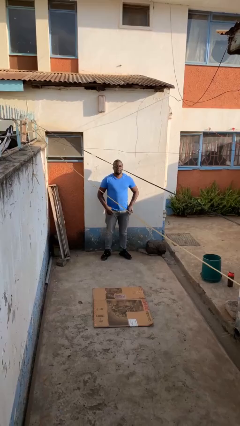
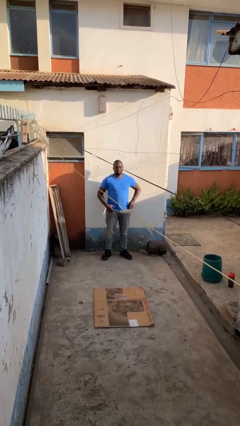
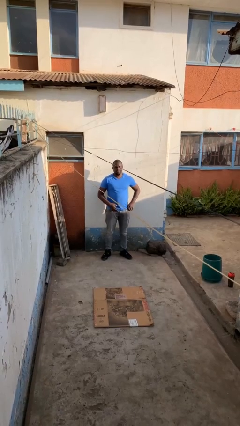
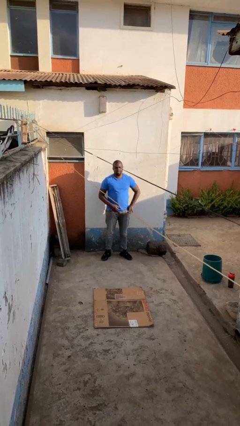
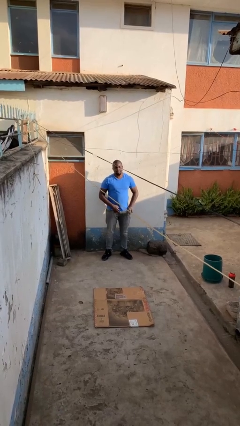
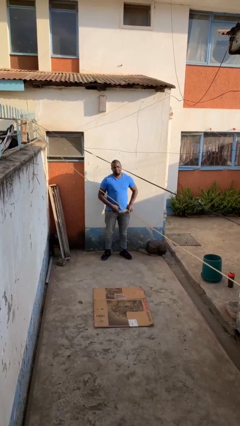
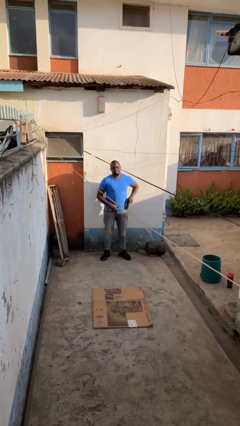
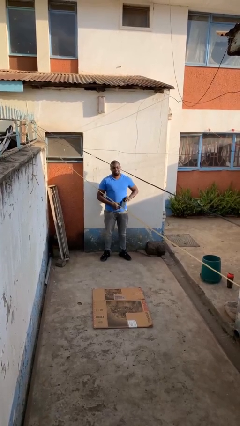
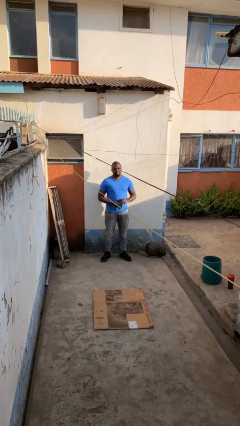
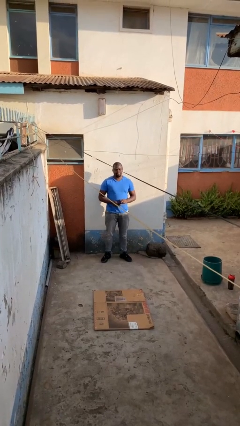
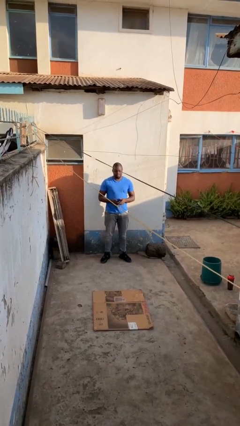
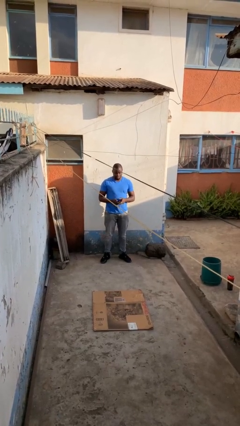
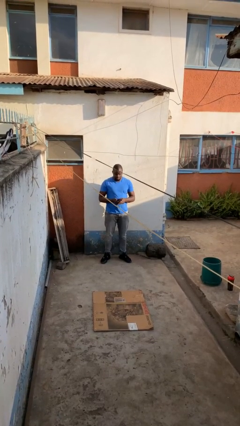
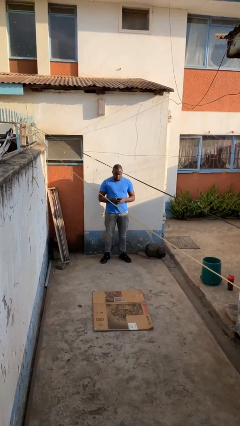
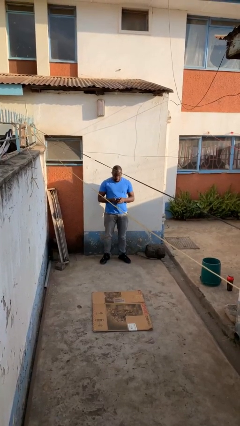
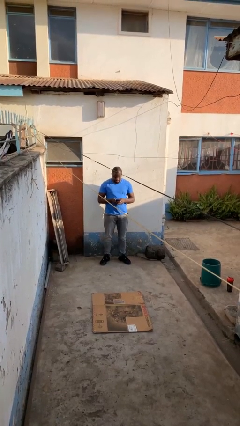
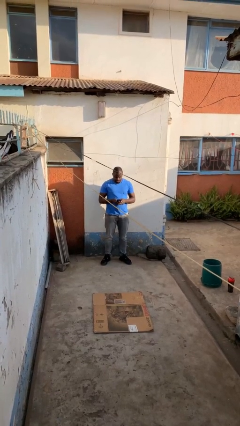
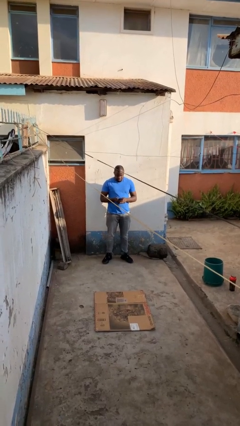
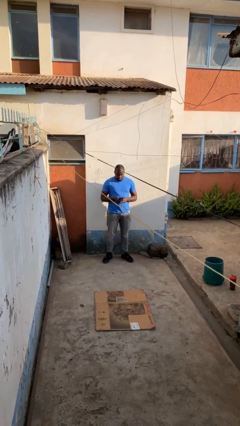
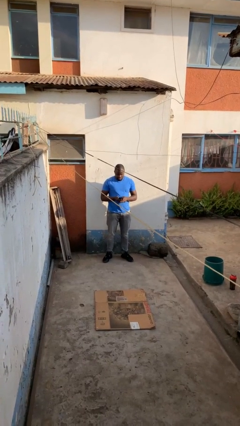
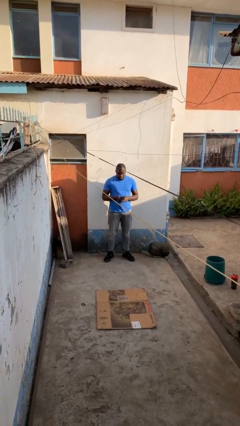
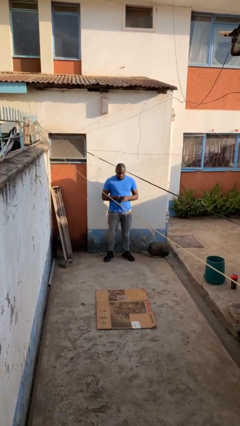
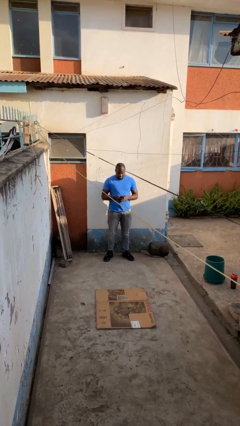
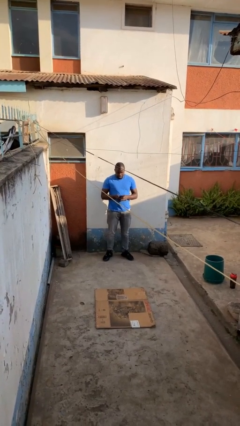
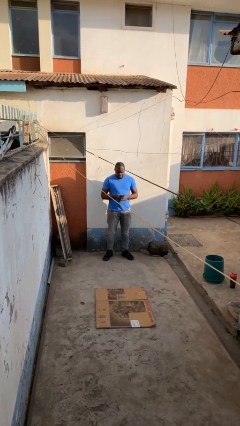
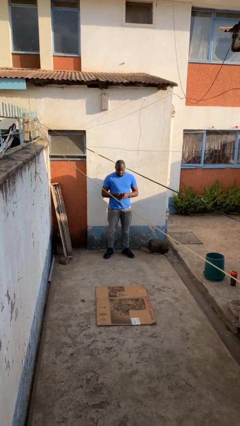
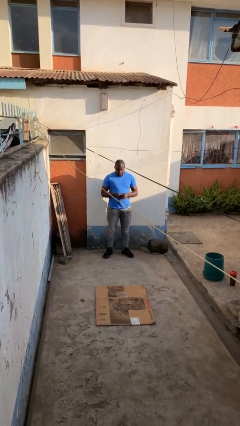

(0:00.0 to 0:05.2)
person takes phone from pocket

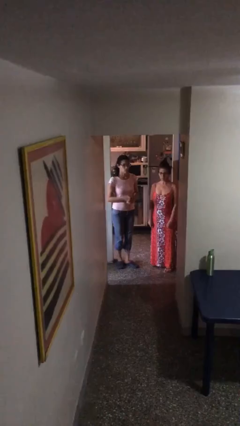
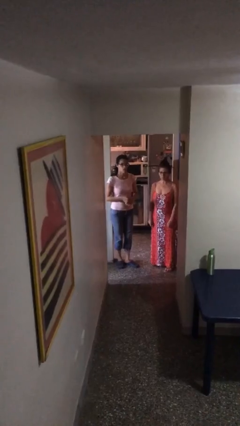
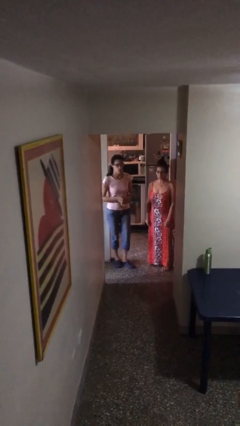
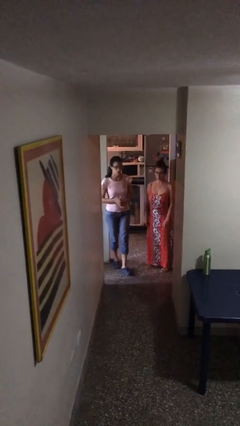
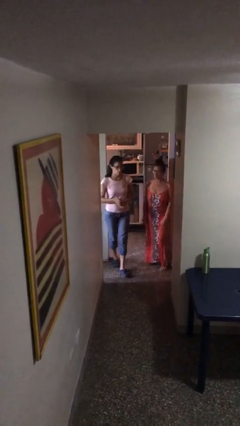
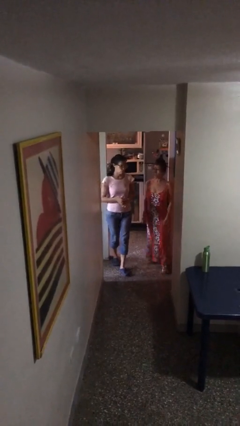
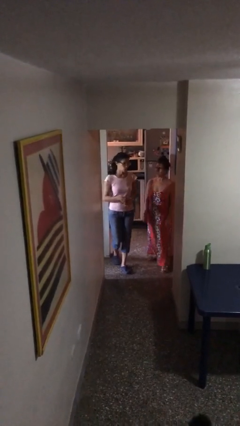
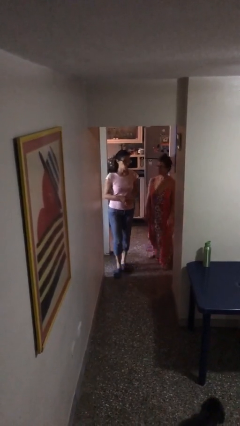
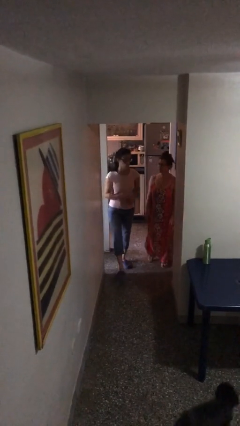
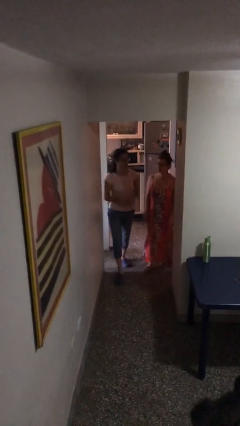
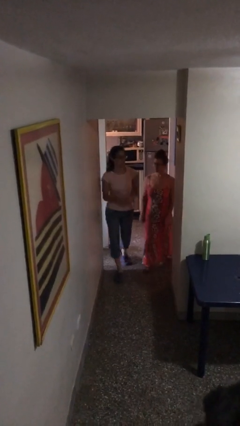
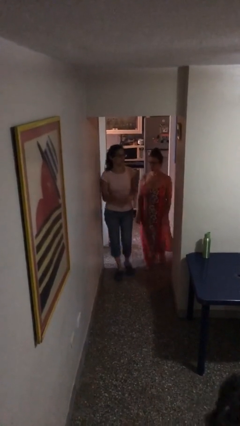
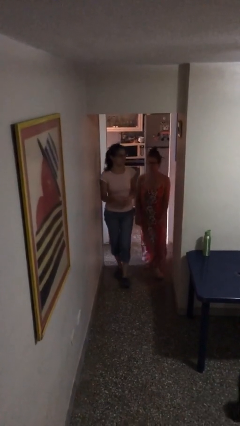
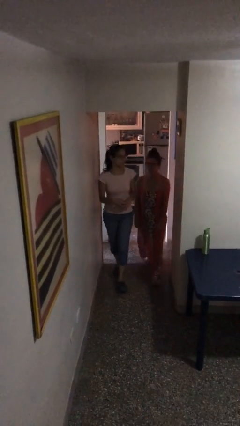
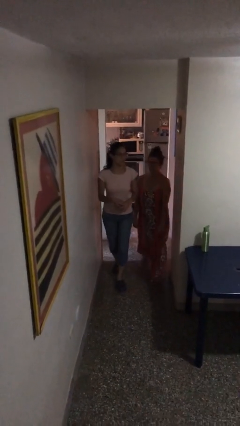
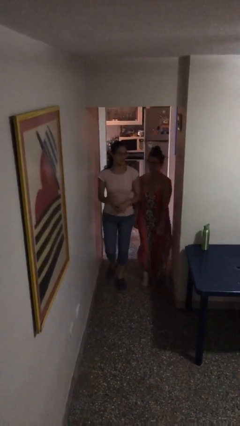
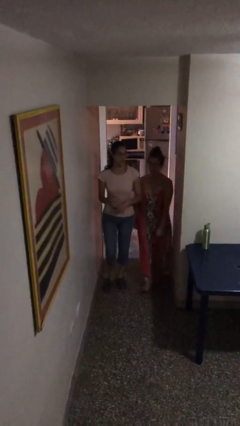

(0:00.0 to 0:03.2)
person talks to person

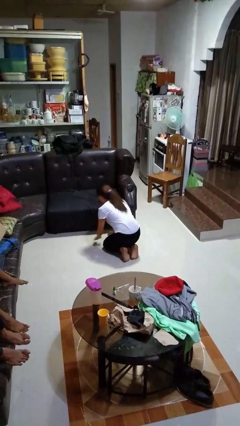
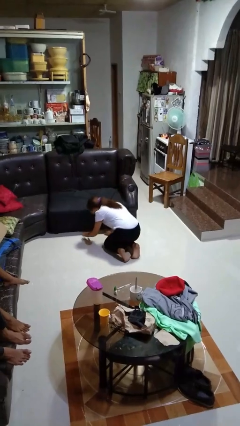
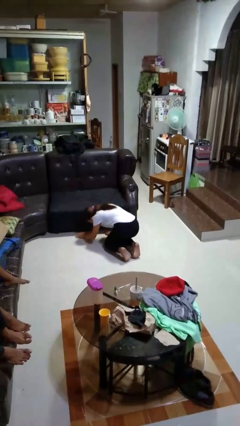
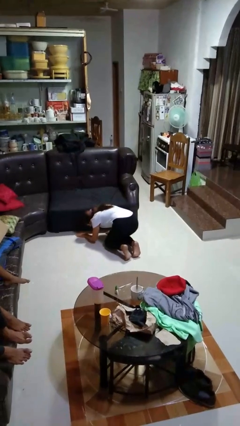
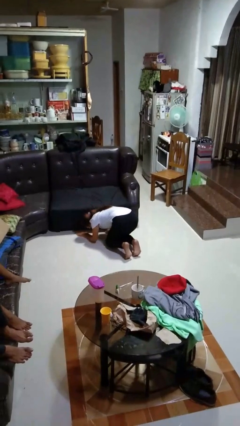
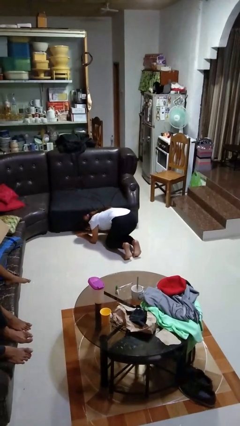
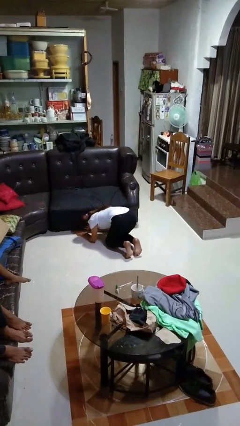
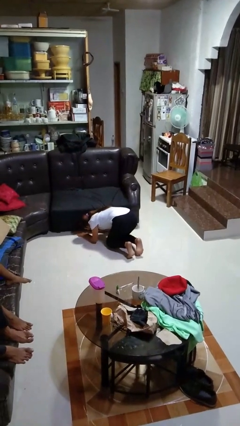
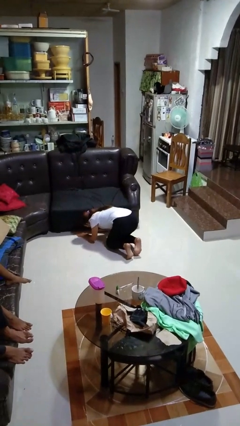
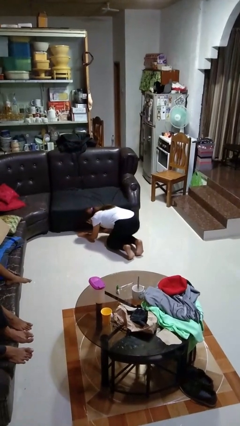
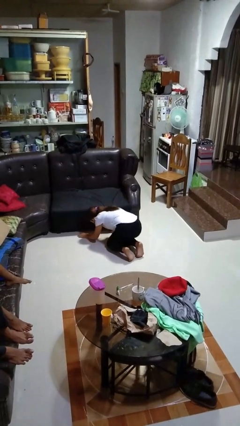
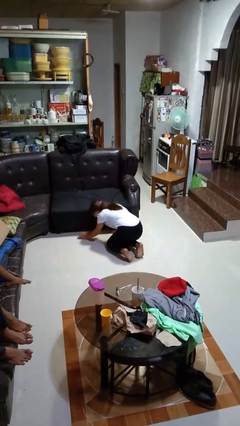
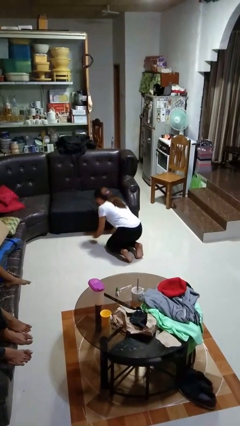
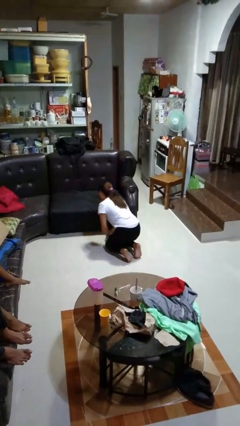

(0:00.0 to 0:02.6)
person searches under couch

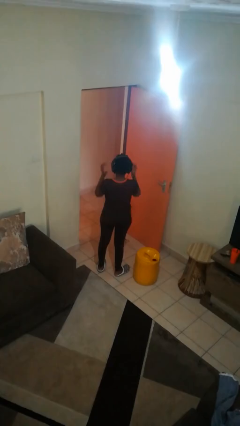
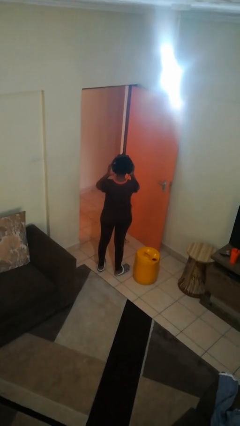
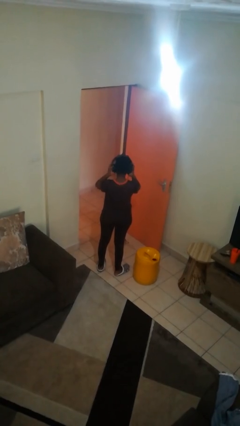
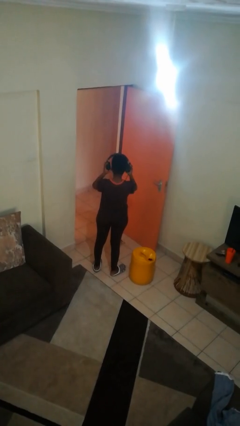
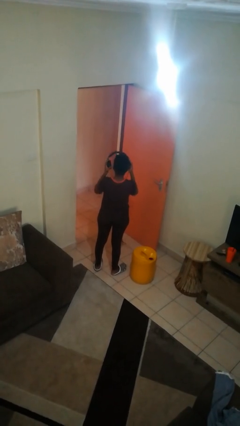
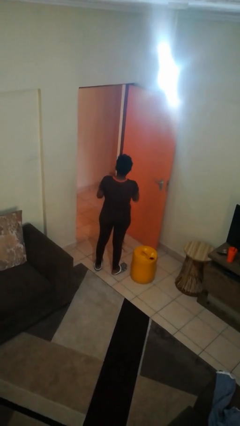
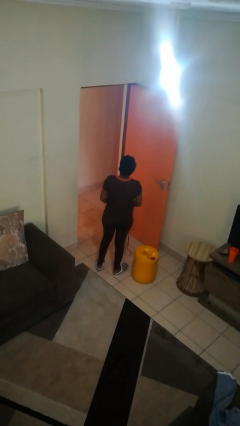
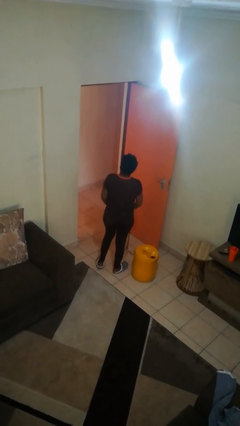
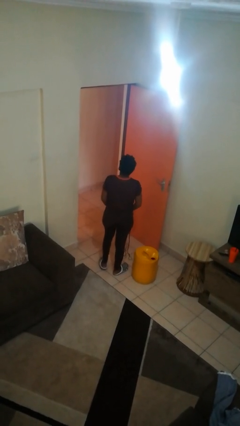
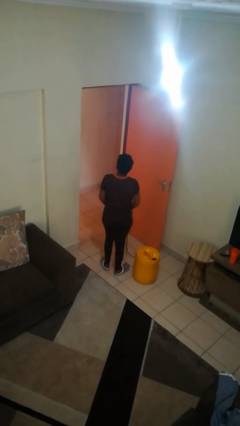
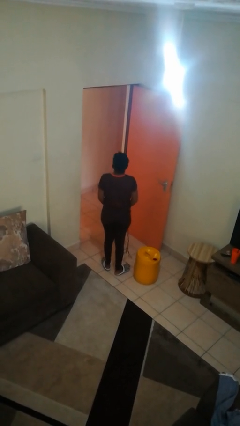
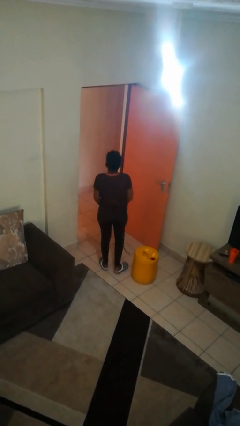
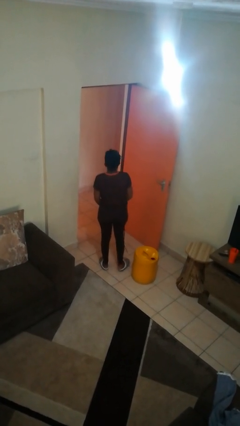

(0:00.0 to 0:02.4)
person takes off headphones

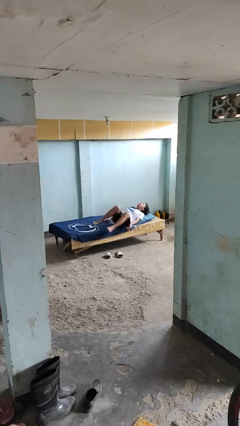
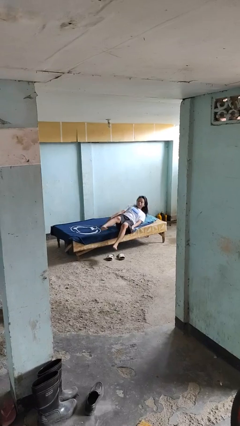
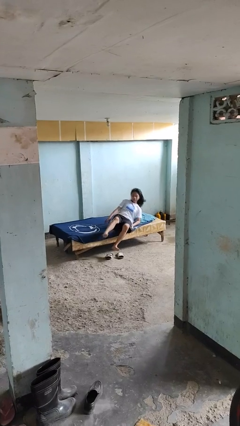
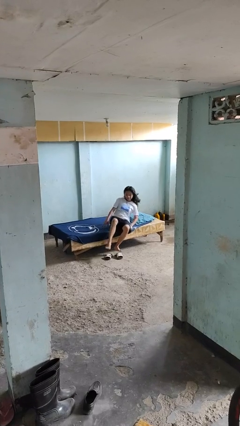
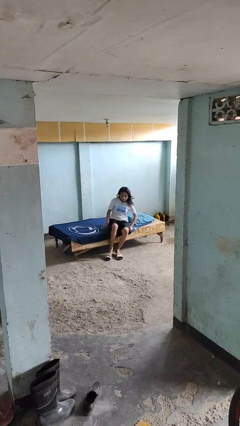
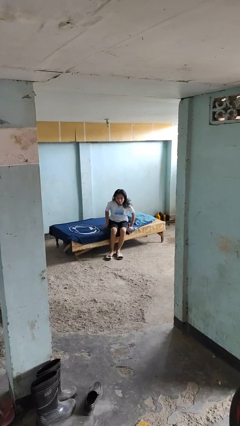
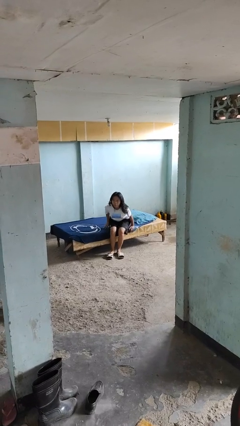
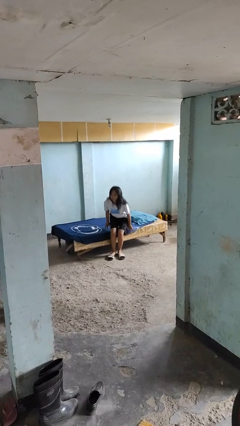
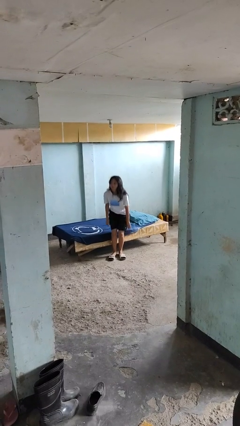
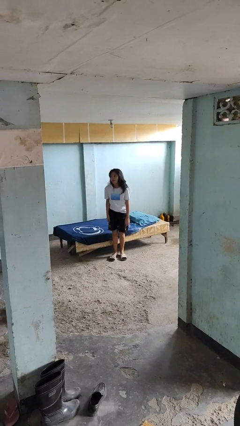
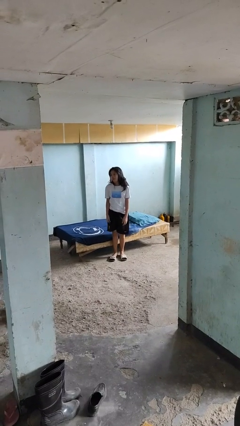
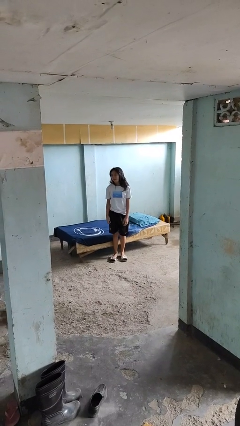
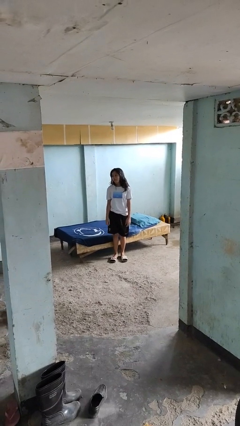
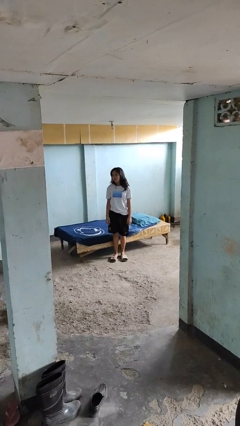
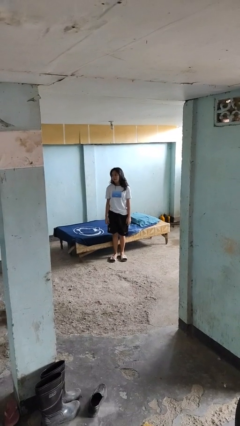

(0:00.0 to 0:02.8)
person stands up

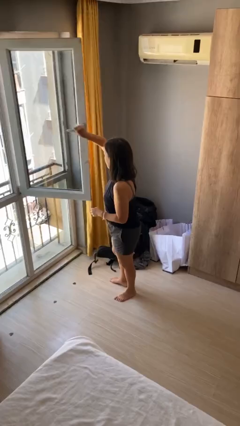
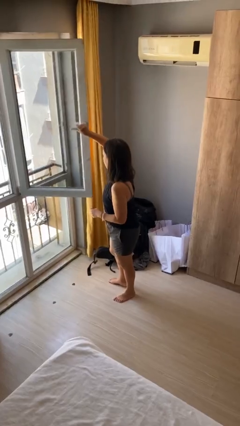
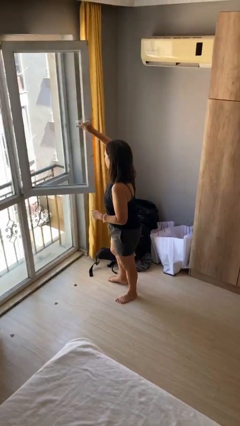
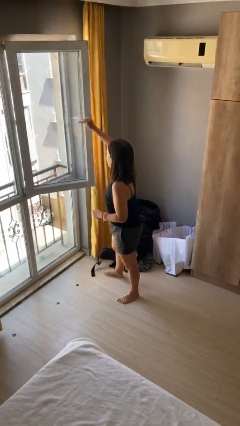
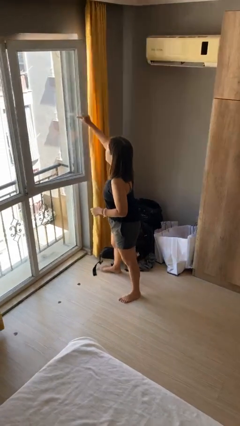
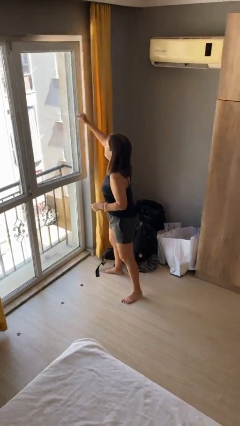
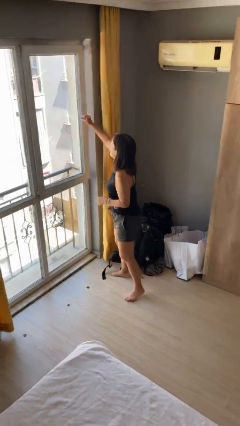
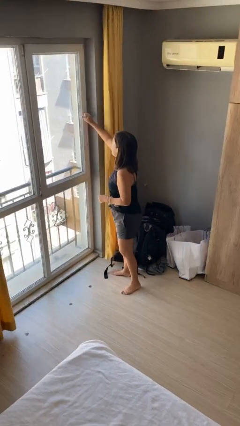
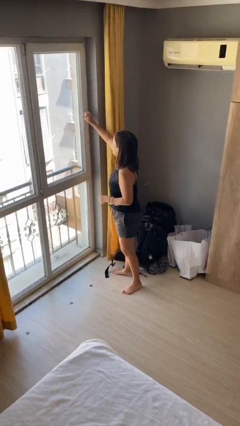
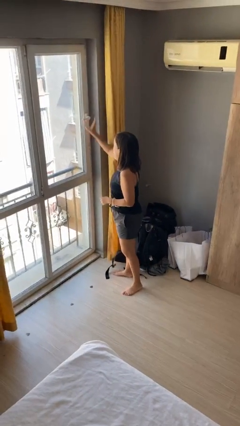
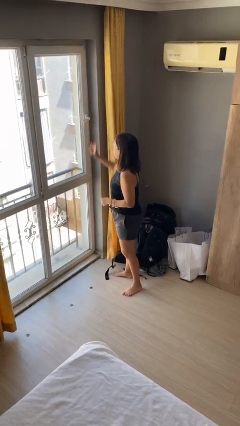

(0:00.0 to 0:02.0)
person closes home window
